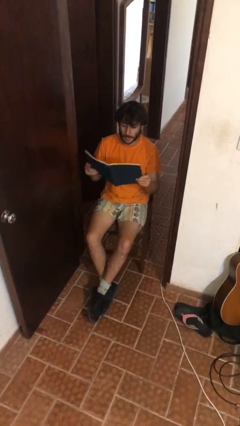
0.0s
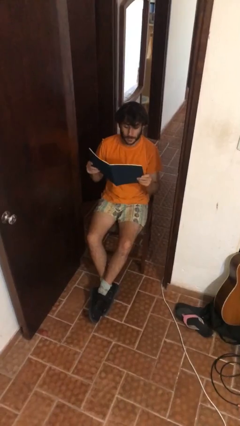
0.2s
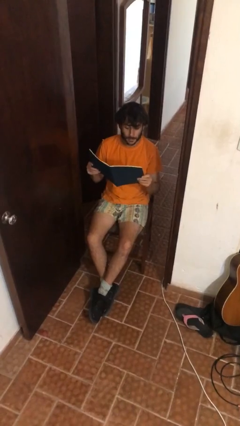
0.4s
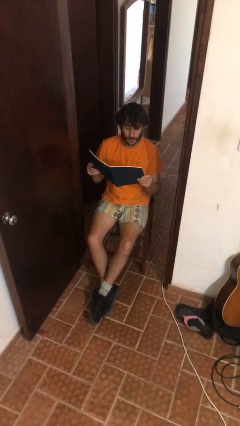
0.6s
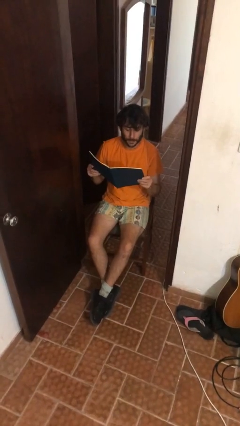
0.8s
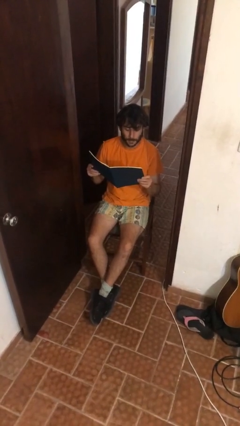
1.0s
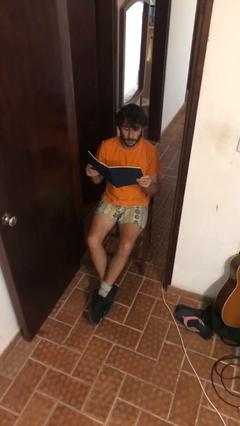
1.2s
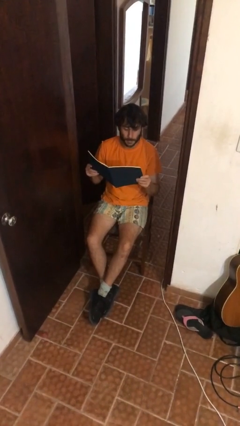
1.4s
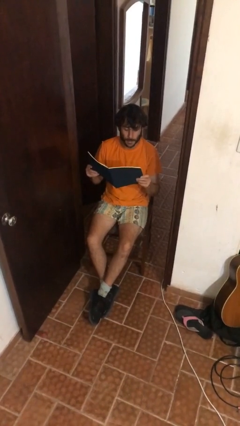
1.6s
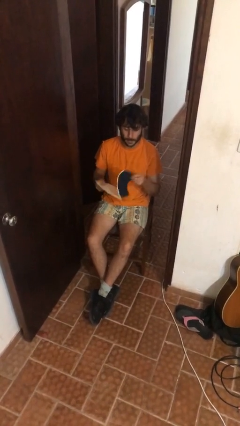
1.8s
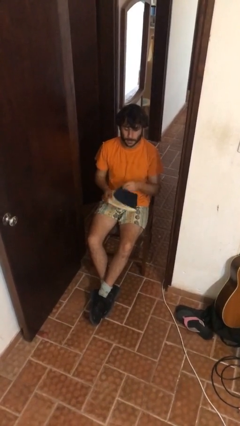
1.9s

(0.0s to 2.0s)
person reads document

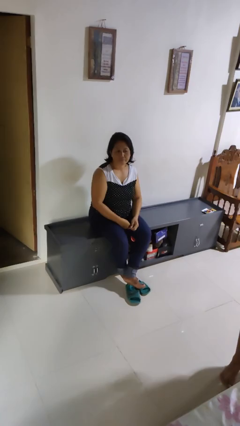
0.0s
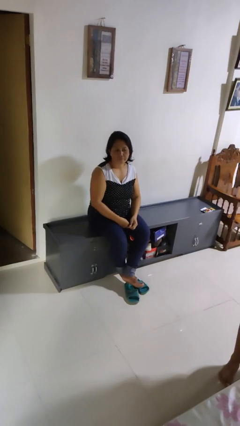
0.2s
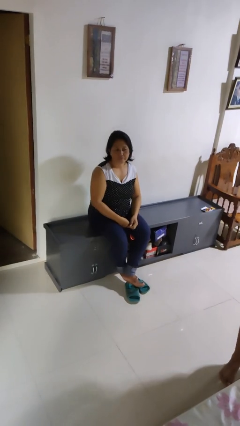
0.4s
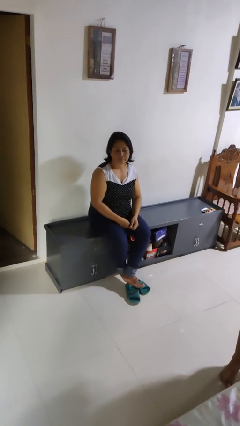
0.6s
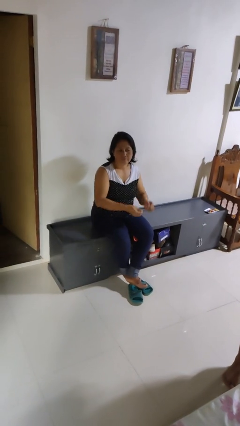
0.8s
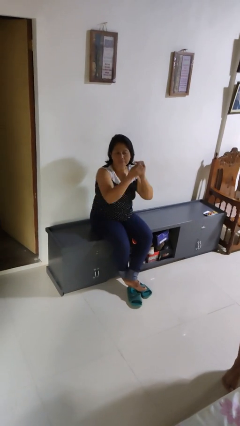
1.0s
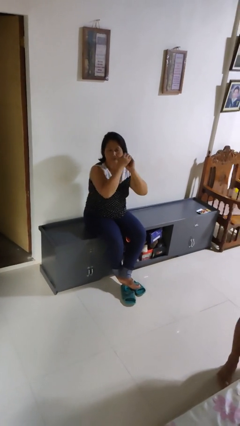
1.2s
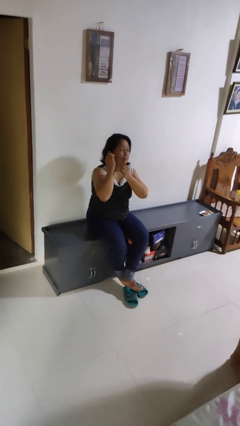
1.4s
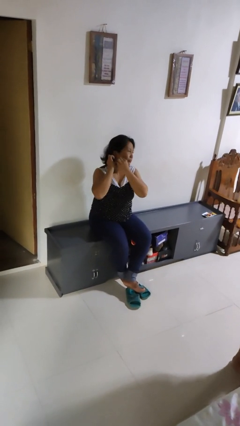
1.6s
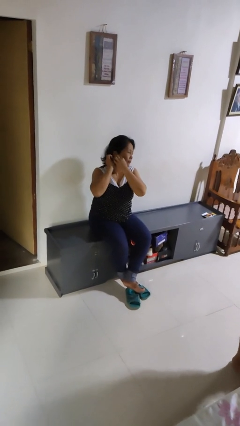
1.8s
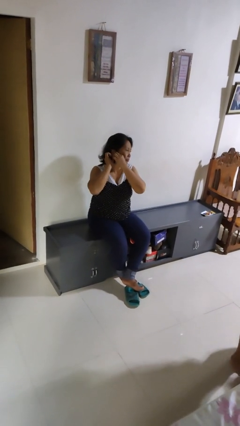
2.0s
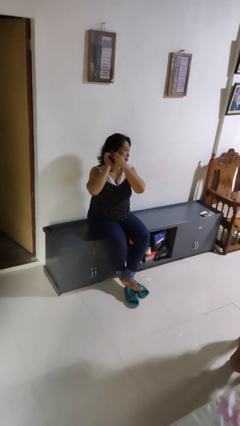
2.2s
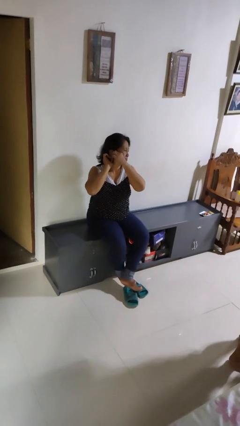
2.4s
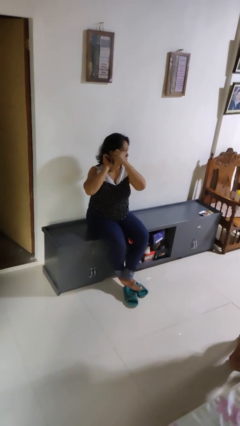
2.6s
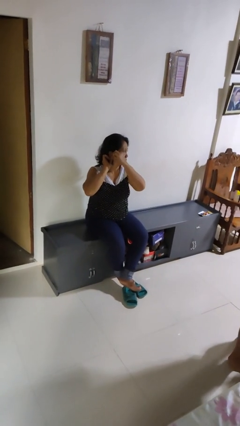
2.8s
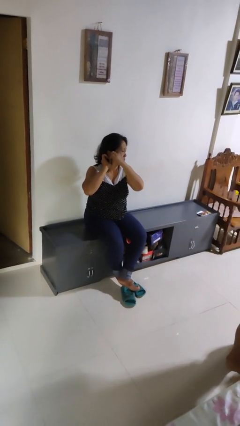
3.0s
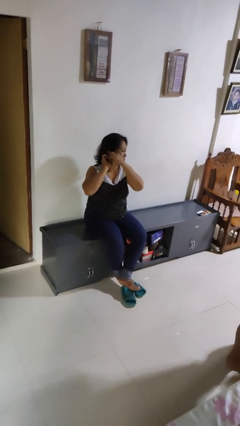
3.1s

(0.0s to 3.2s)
person puts on earrings

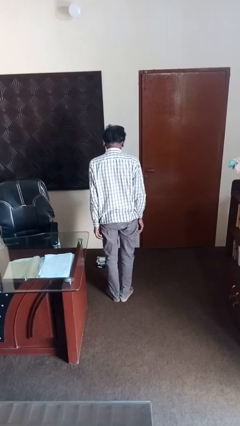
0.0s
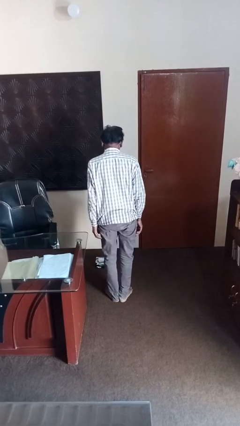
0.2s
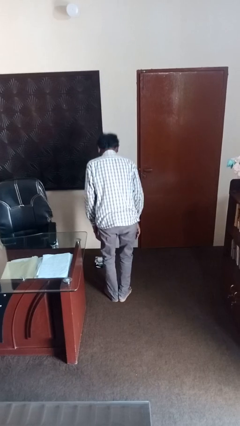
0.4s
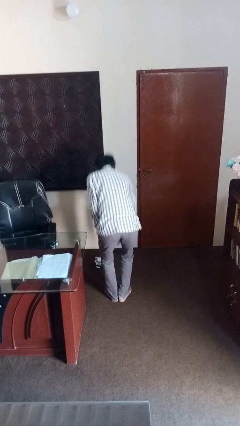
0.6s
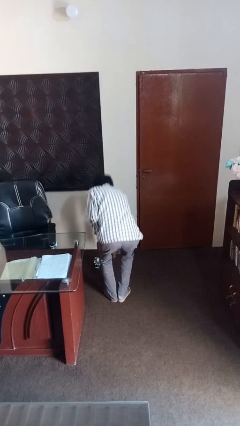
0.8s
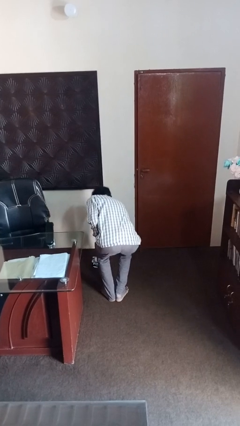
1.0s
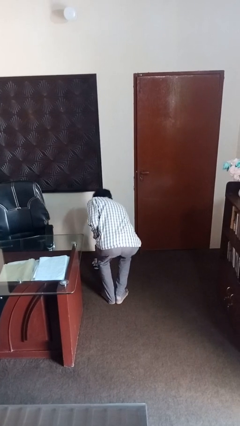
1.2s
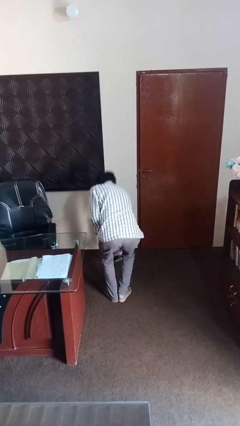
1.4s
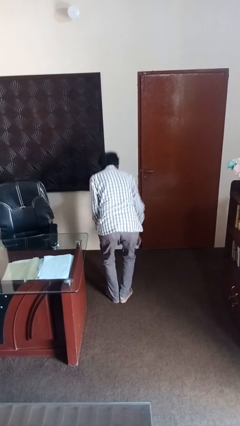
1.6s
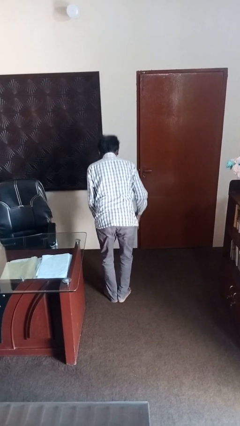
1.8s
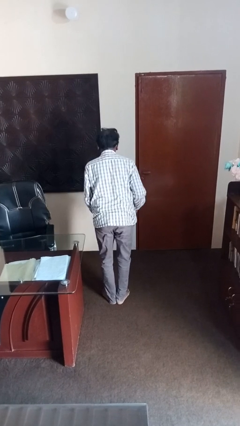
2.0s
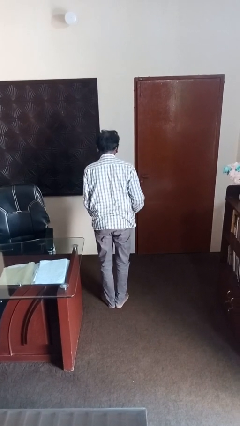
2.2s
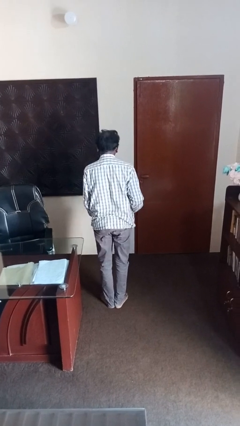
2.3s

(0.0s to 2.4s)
person picks up object from floor

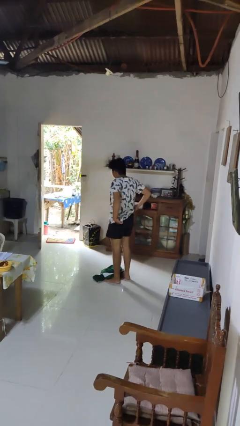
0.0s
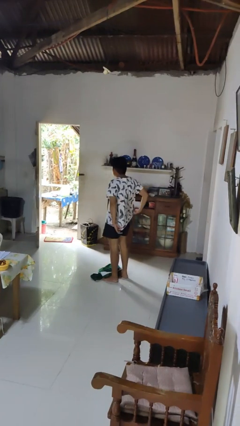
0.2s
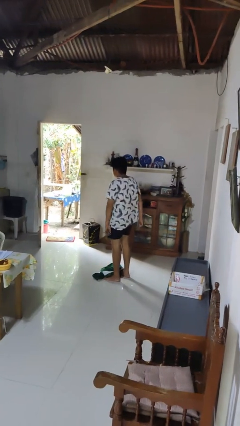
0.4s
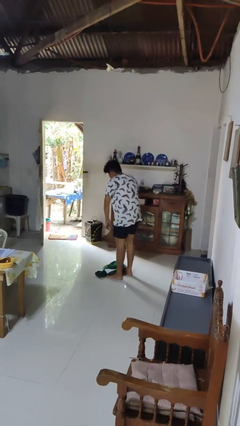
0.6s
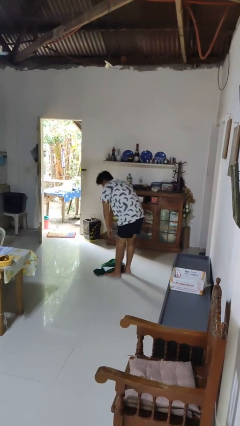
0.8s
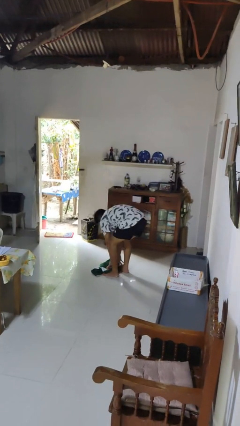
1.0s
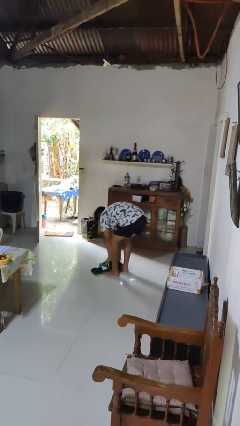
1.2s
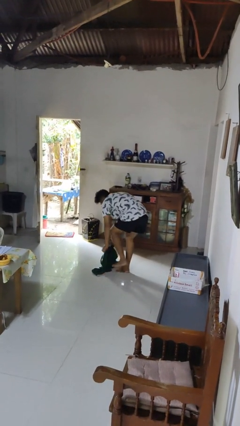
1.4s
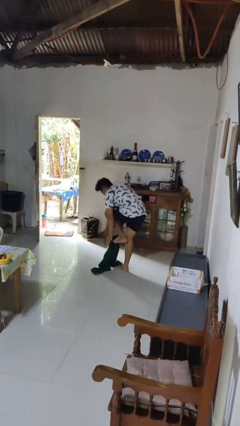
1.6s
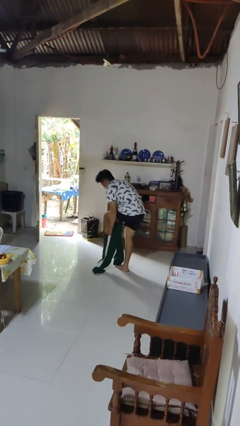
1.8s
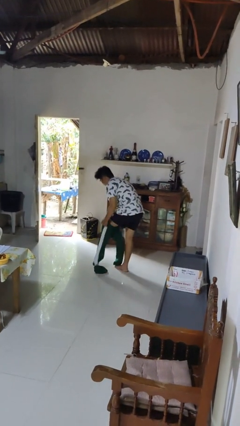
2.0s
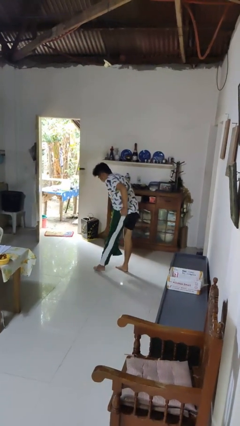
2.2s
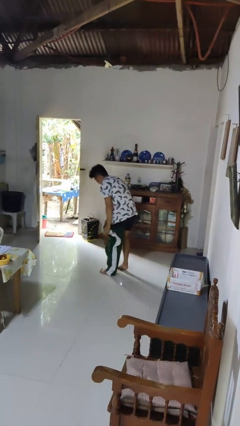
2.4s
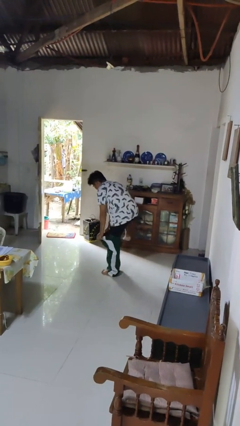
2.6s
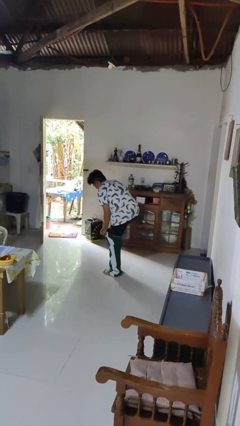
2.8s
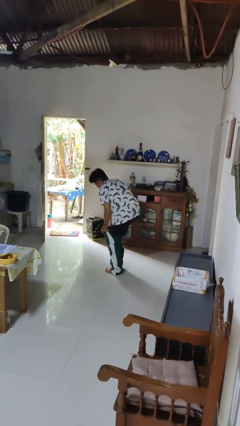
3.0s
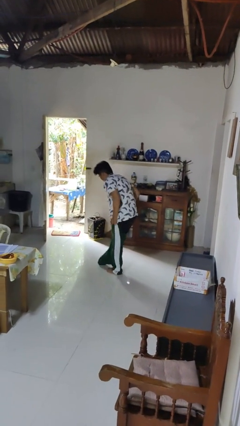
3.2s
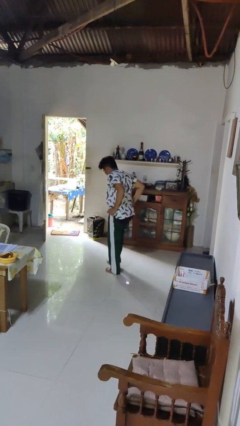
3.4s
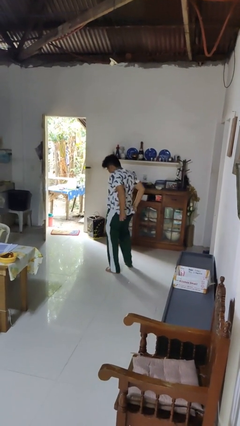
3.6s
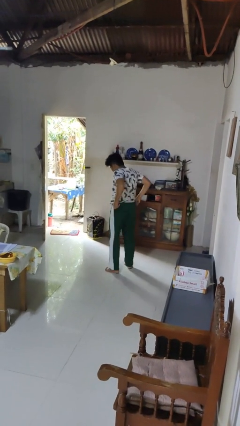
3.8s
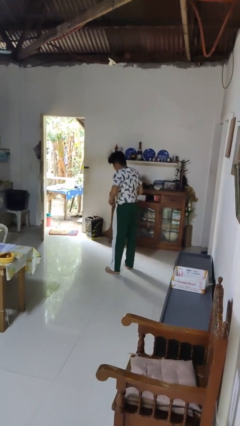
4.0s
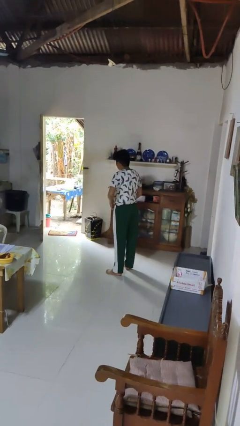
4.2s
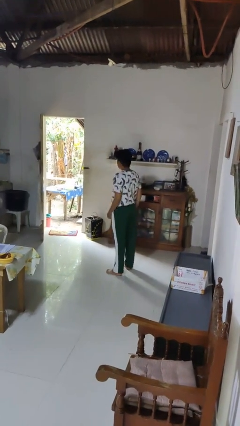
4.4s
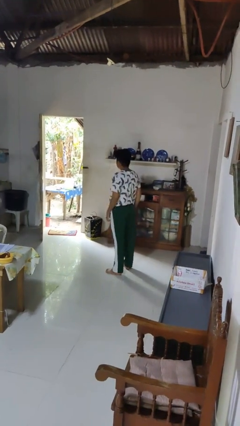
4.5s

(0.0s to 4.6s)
person puts on pants

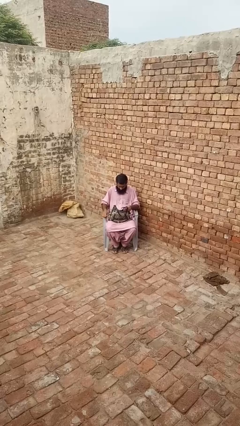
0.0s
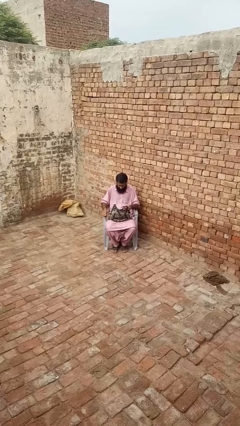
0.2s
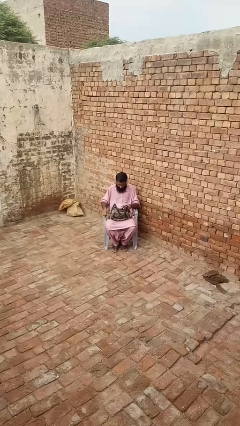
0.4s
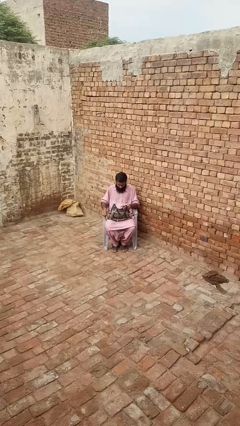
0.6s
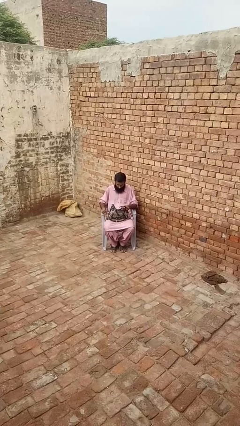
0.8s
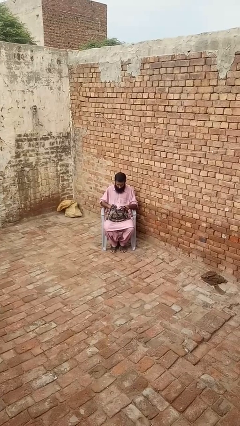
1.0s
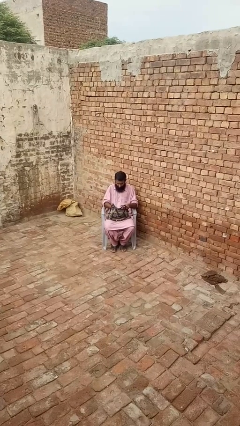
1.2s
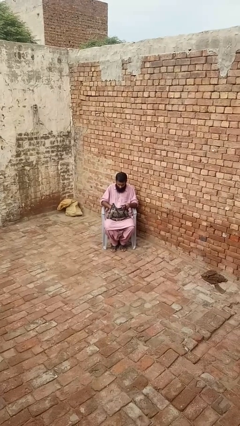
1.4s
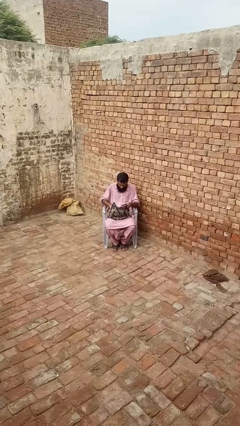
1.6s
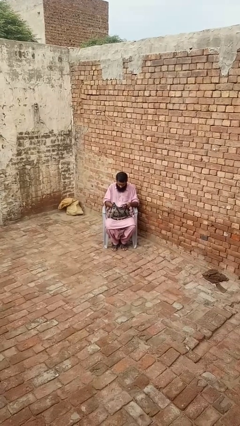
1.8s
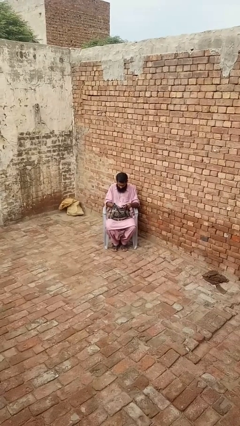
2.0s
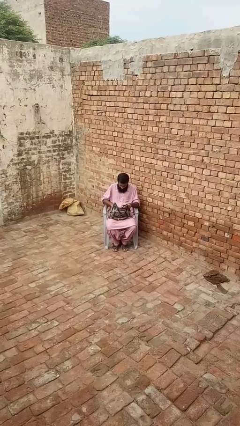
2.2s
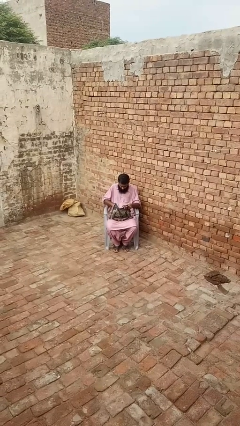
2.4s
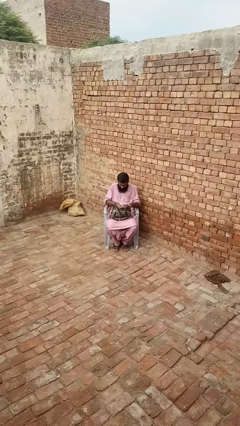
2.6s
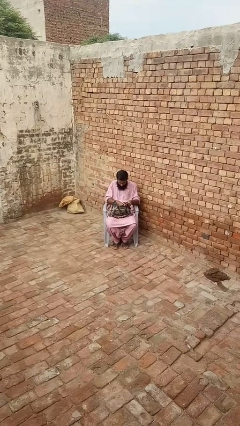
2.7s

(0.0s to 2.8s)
person searches in purse

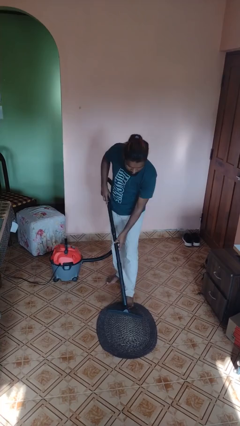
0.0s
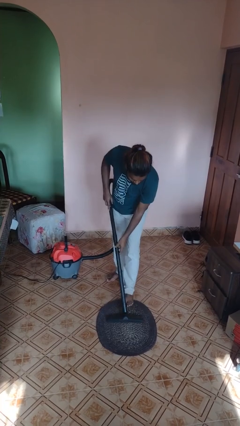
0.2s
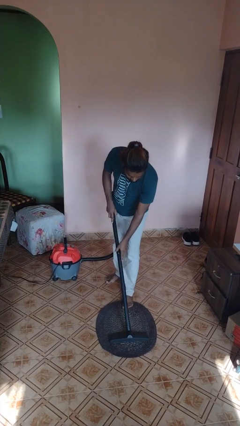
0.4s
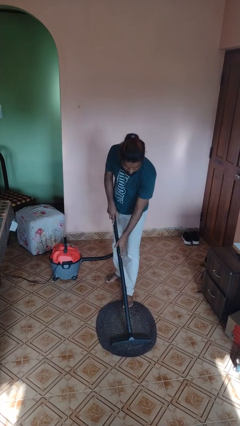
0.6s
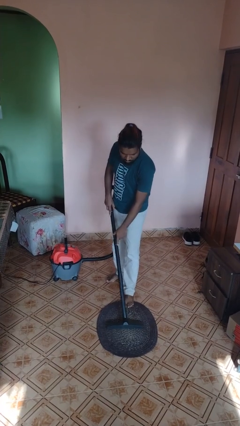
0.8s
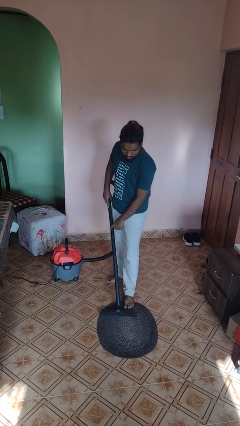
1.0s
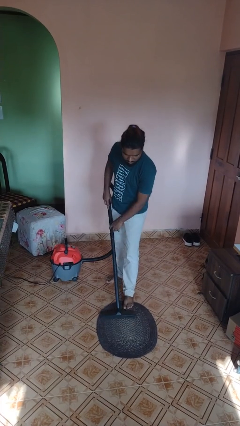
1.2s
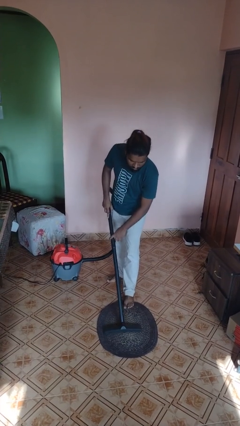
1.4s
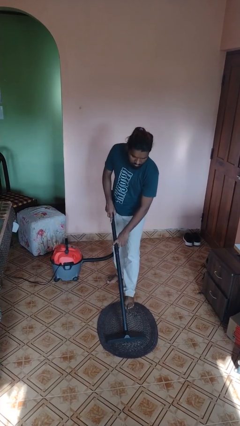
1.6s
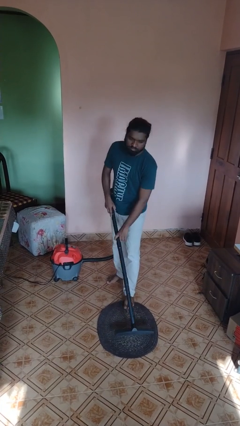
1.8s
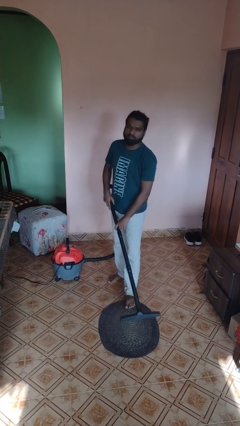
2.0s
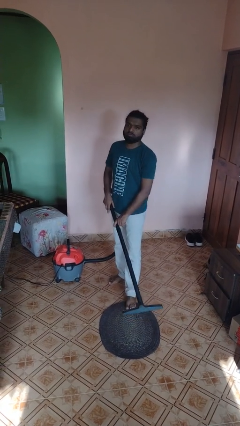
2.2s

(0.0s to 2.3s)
person vacuums carpet

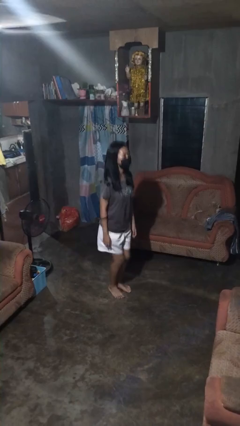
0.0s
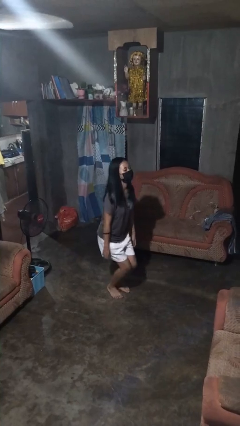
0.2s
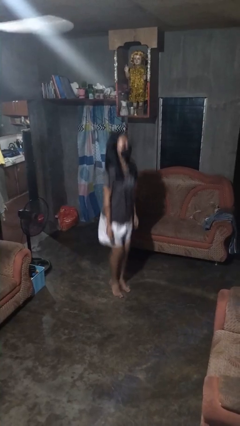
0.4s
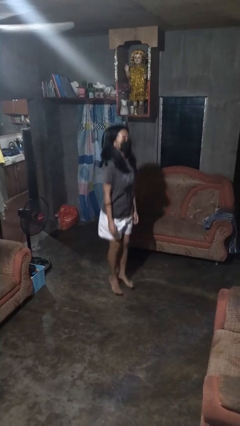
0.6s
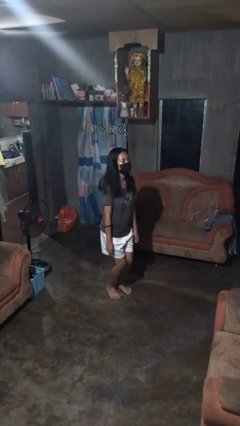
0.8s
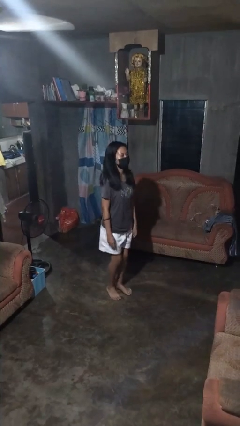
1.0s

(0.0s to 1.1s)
person jumps
